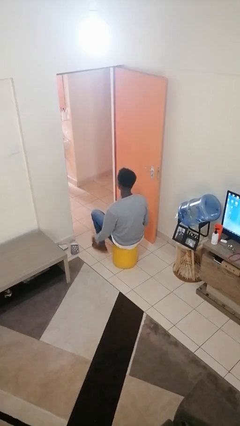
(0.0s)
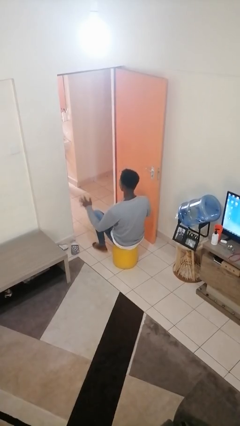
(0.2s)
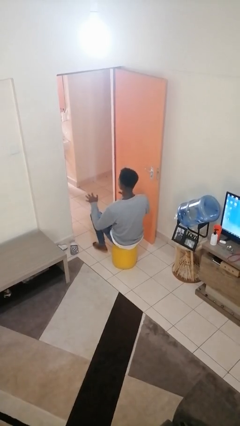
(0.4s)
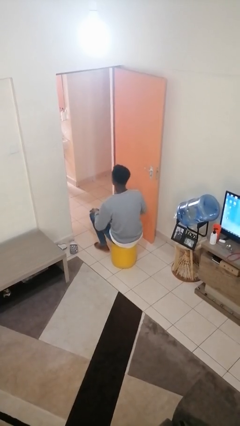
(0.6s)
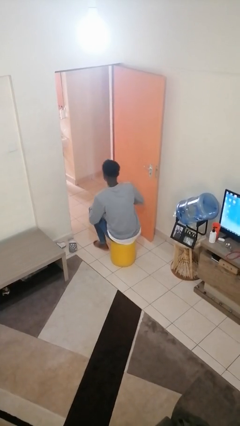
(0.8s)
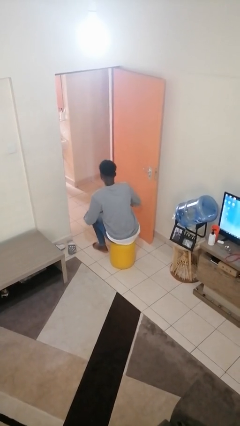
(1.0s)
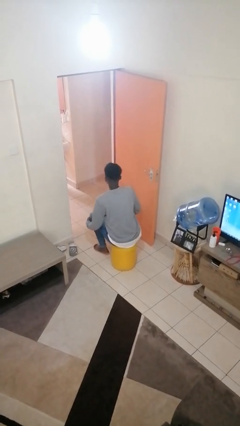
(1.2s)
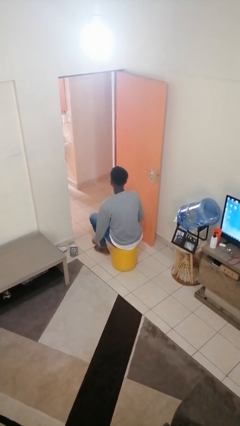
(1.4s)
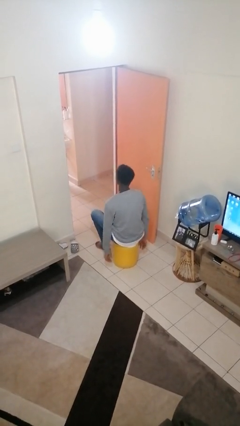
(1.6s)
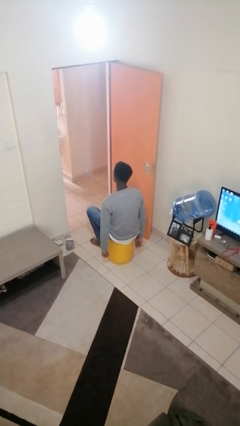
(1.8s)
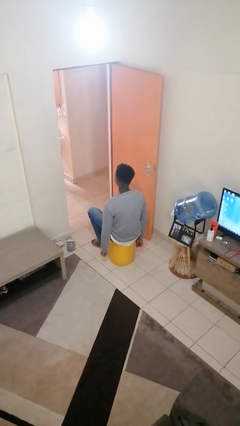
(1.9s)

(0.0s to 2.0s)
person slaps hands on thighs

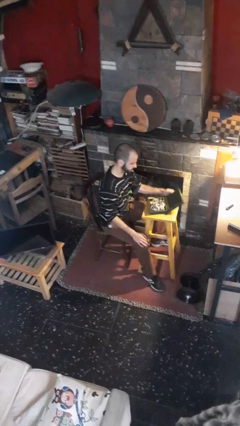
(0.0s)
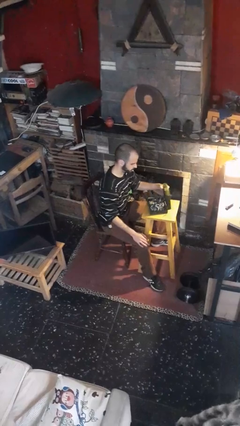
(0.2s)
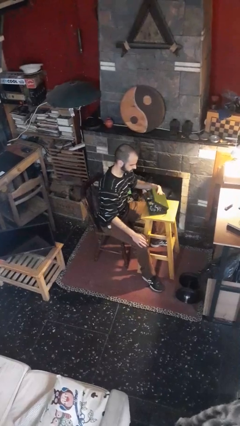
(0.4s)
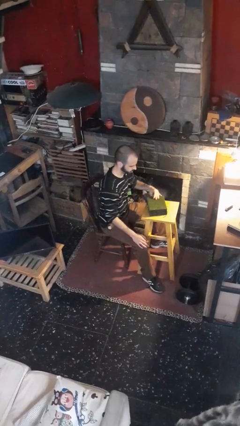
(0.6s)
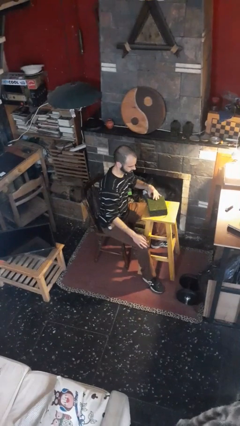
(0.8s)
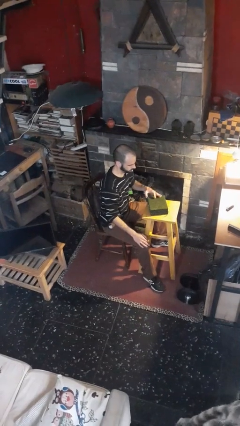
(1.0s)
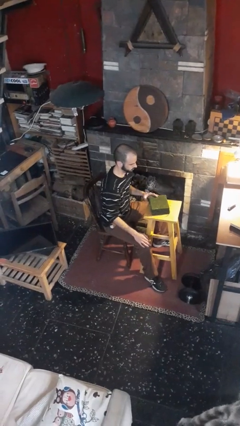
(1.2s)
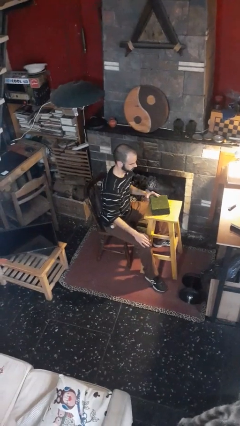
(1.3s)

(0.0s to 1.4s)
person closes jewelry box

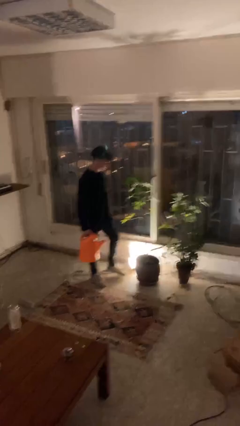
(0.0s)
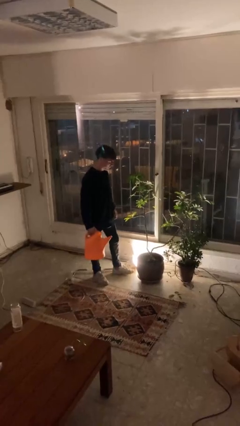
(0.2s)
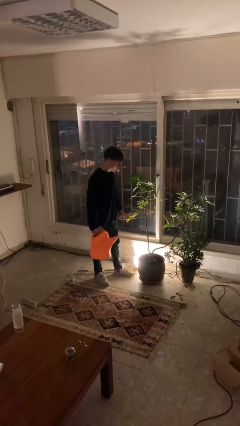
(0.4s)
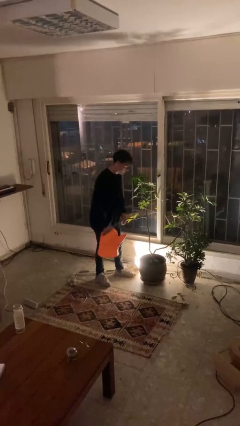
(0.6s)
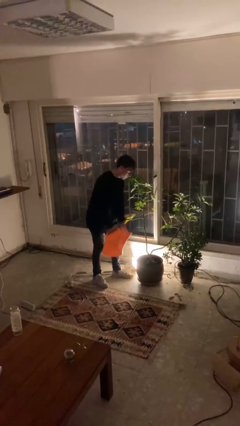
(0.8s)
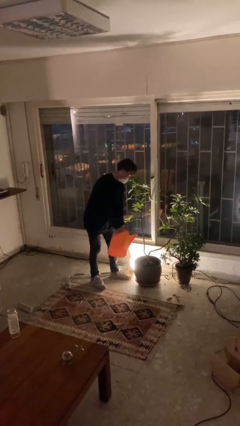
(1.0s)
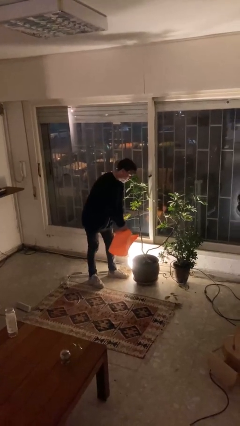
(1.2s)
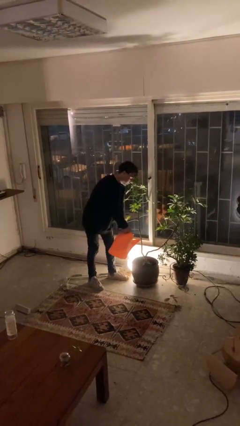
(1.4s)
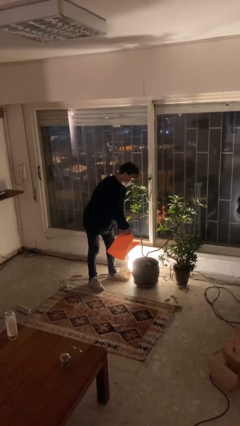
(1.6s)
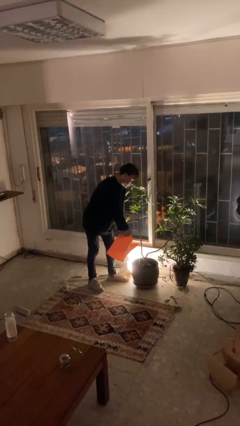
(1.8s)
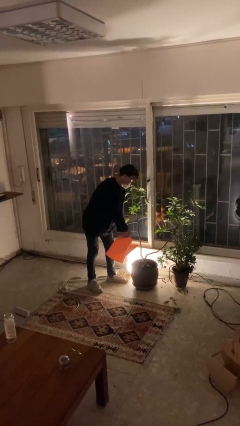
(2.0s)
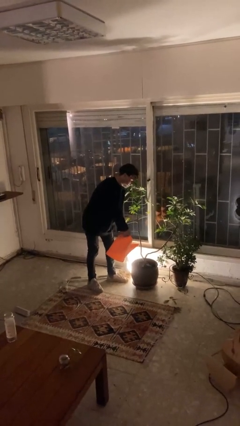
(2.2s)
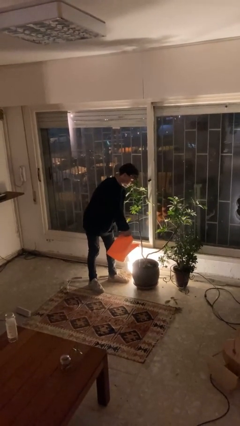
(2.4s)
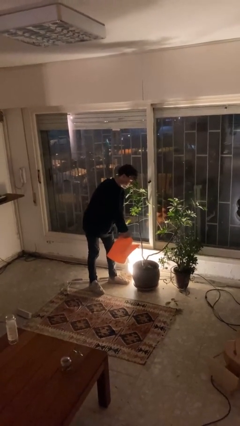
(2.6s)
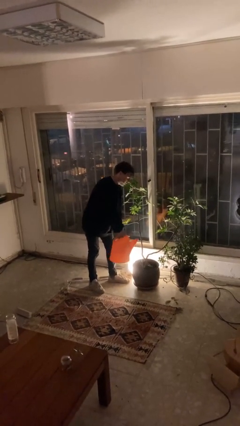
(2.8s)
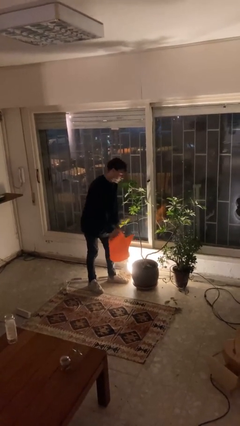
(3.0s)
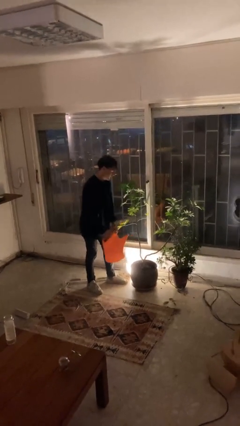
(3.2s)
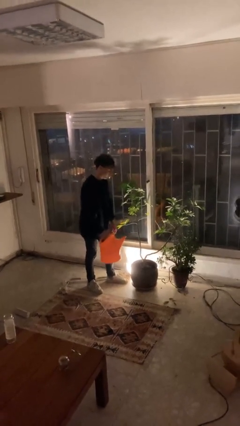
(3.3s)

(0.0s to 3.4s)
person waters houseplant

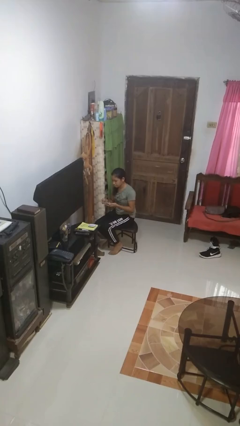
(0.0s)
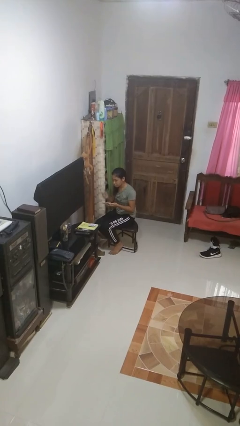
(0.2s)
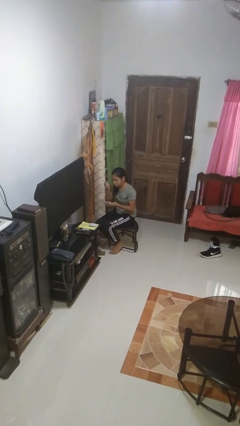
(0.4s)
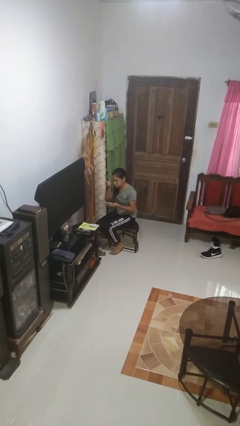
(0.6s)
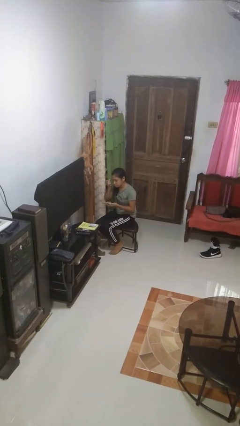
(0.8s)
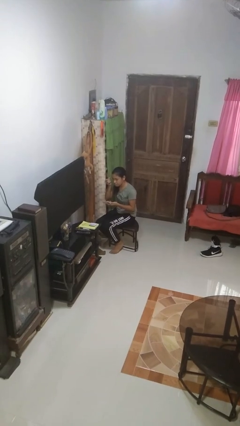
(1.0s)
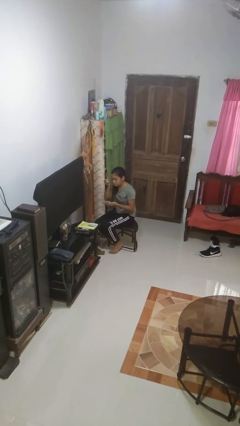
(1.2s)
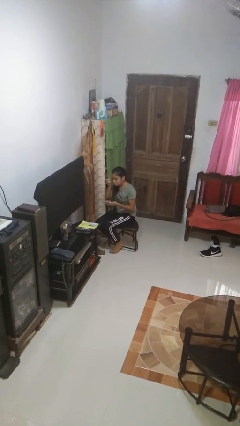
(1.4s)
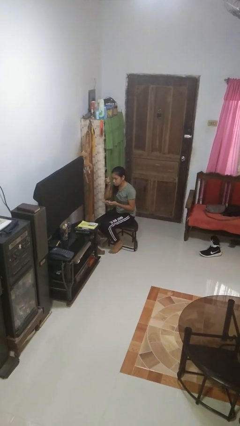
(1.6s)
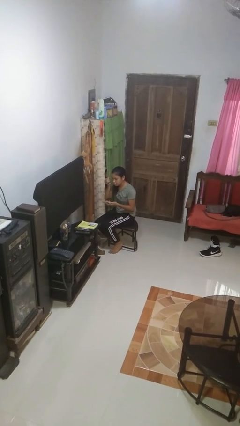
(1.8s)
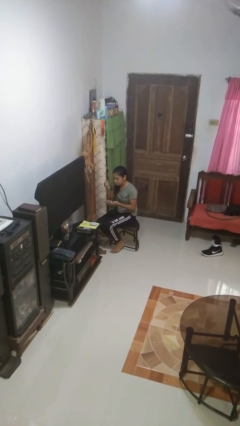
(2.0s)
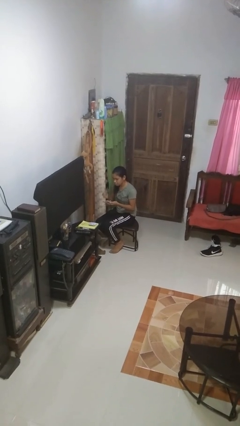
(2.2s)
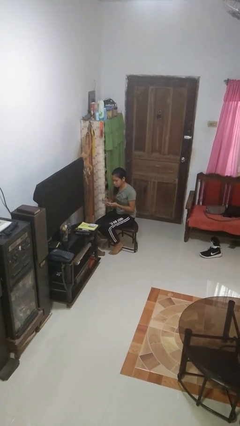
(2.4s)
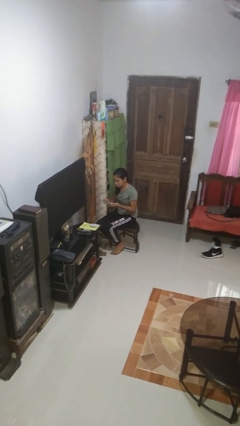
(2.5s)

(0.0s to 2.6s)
person applies eye makeup

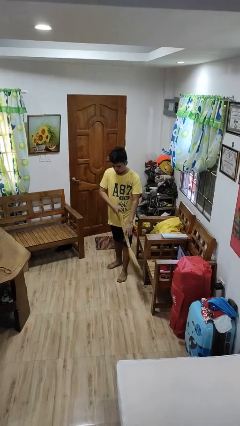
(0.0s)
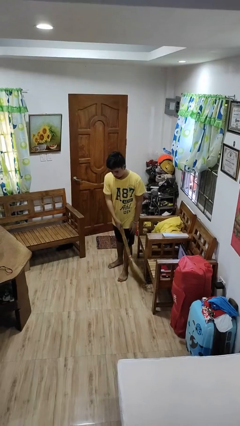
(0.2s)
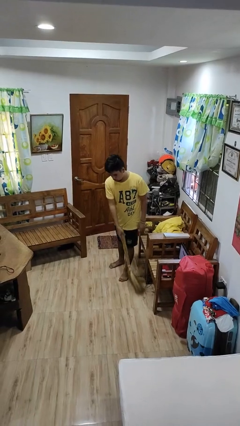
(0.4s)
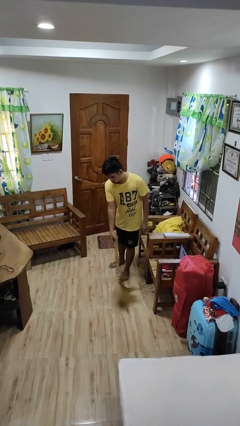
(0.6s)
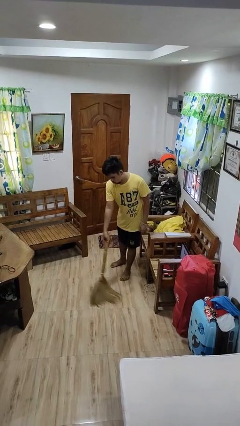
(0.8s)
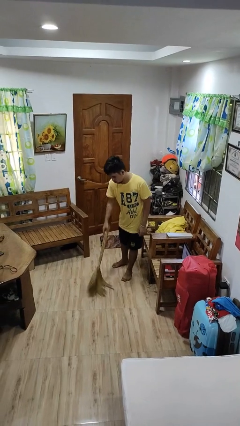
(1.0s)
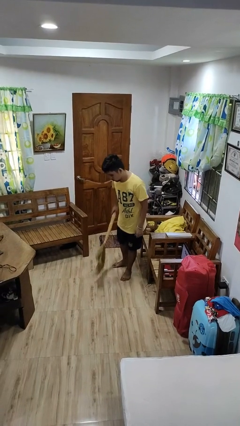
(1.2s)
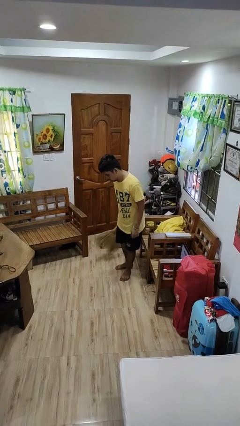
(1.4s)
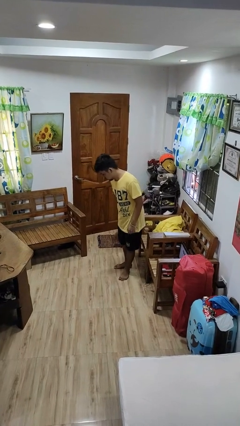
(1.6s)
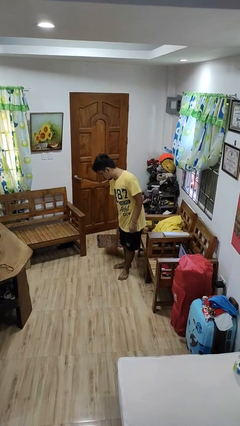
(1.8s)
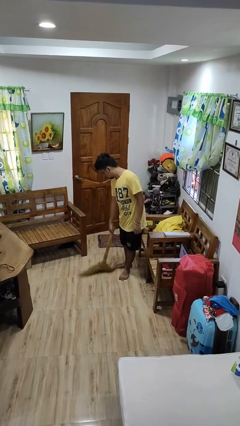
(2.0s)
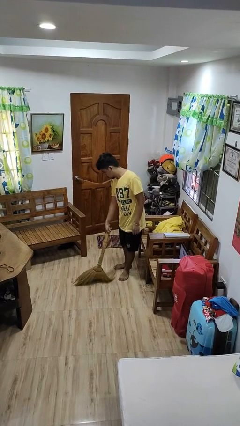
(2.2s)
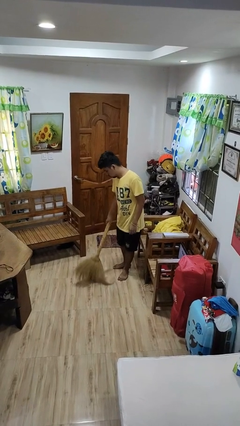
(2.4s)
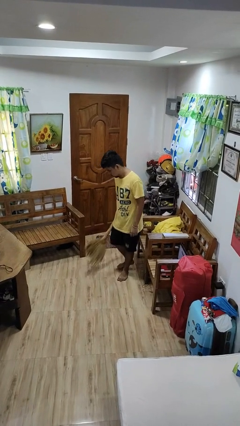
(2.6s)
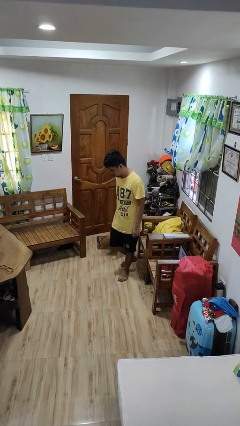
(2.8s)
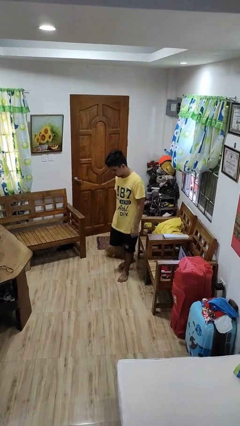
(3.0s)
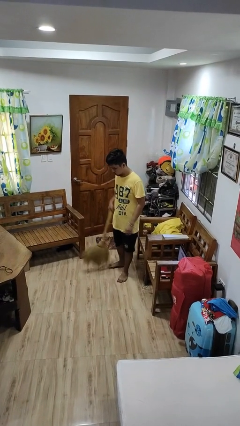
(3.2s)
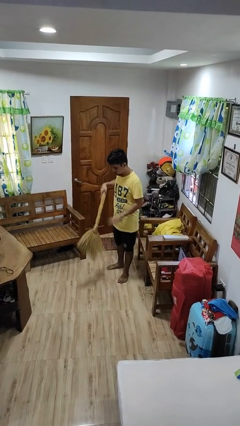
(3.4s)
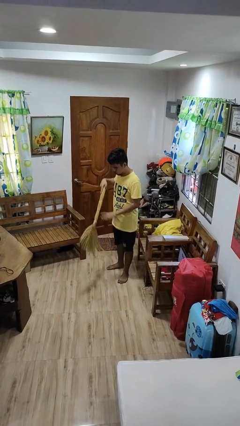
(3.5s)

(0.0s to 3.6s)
person sweeps floor

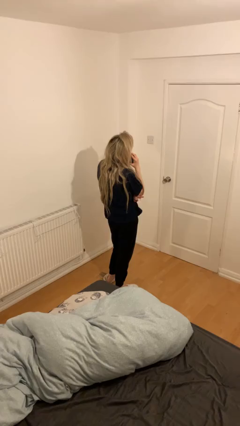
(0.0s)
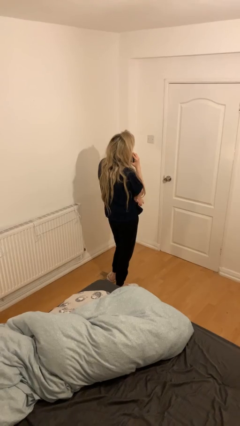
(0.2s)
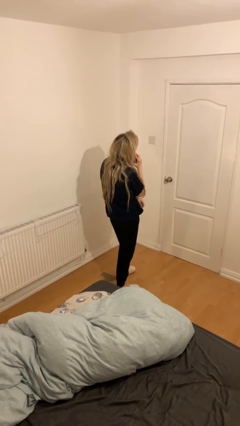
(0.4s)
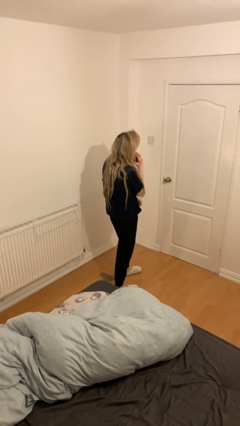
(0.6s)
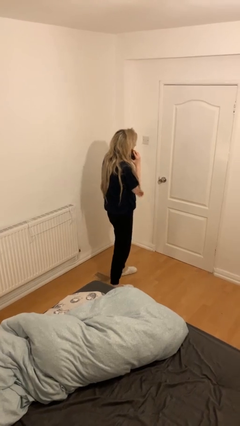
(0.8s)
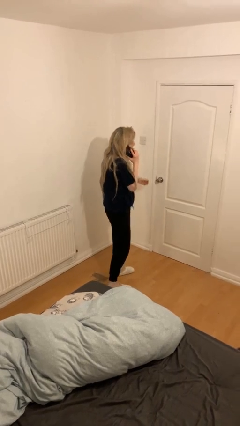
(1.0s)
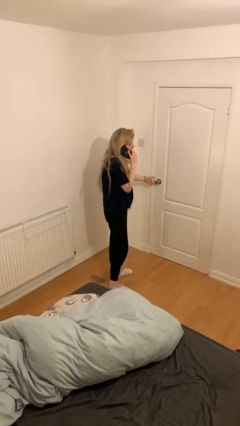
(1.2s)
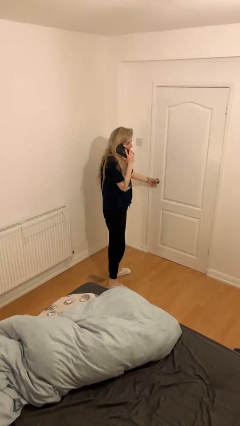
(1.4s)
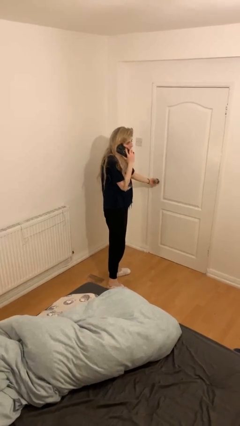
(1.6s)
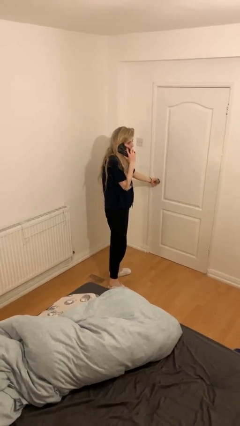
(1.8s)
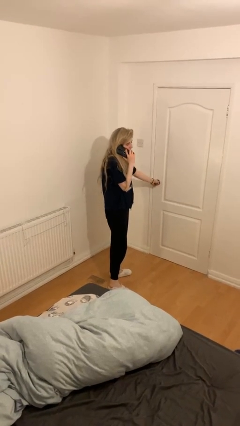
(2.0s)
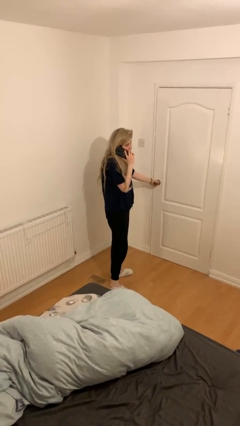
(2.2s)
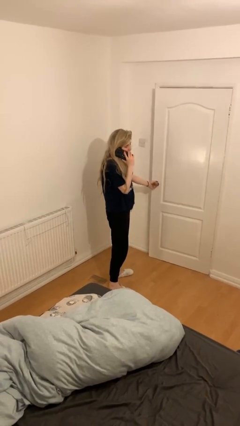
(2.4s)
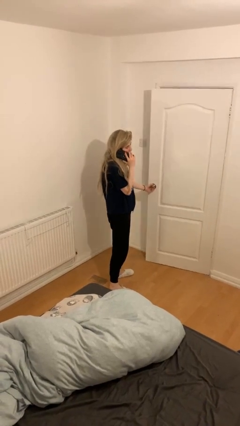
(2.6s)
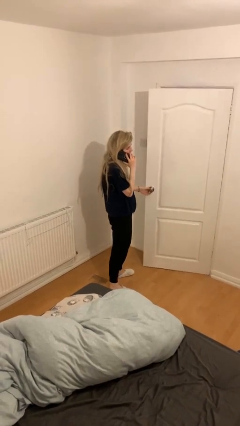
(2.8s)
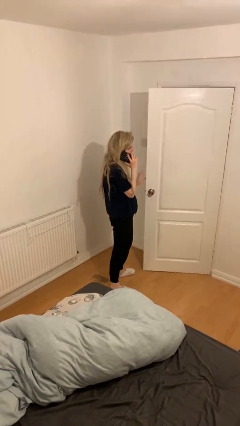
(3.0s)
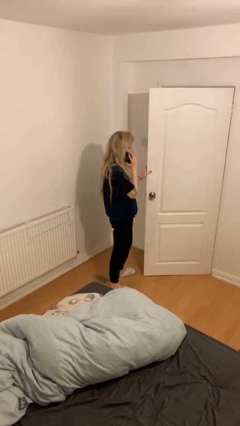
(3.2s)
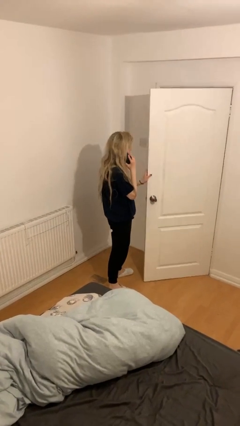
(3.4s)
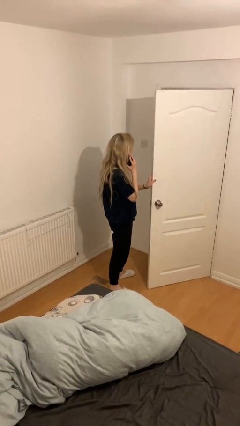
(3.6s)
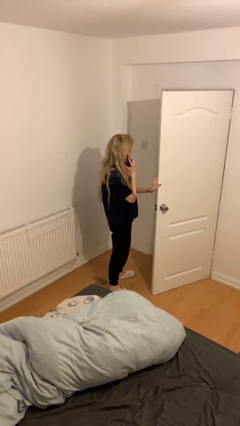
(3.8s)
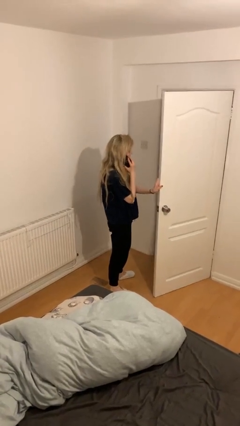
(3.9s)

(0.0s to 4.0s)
person opens facility door

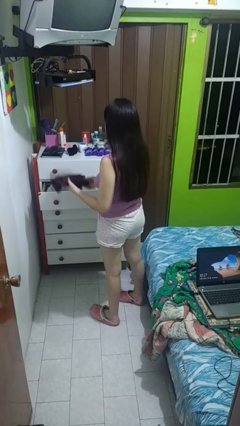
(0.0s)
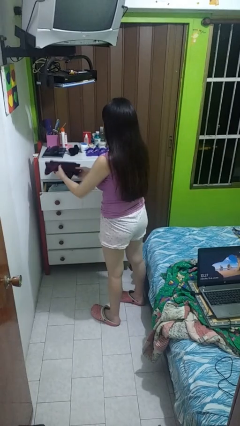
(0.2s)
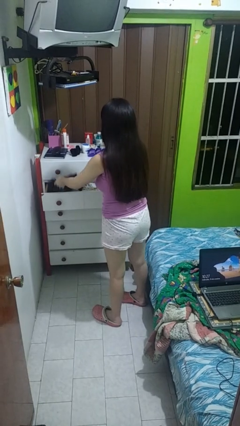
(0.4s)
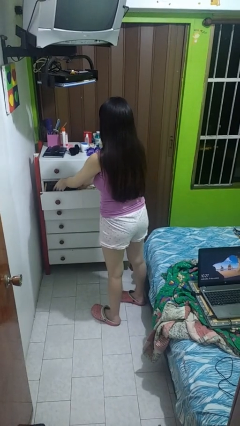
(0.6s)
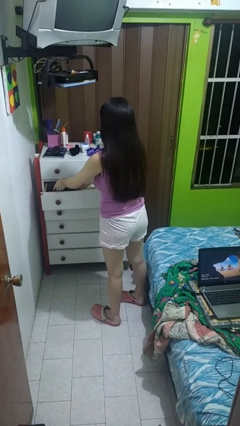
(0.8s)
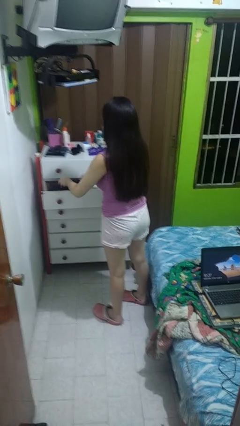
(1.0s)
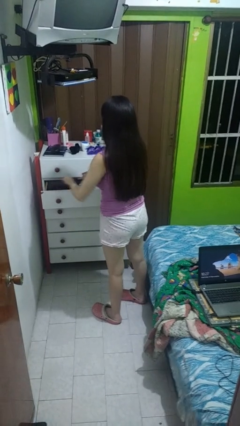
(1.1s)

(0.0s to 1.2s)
person puts clothes into dresser
